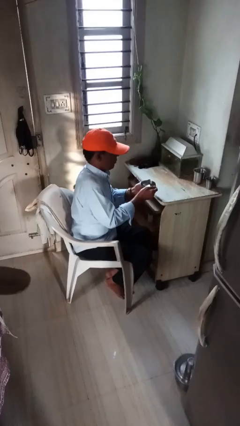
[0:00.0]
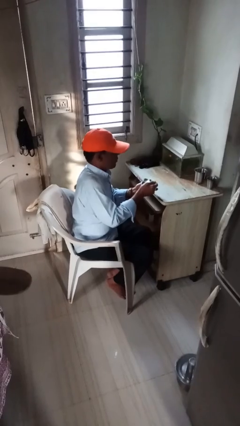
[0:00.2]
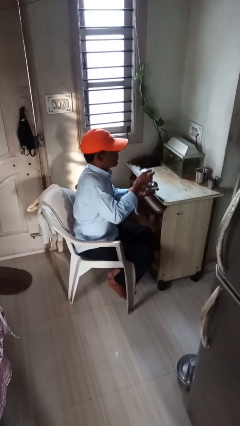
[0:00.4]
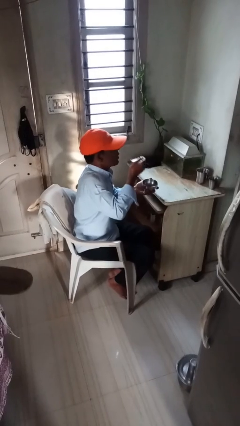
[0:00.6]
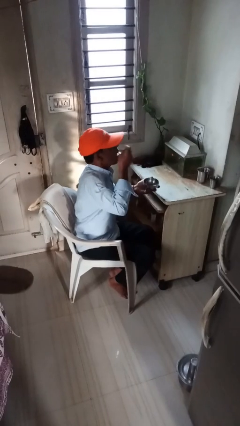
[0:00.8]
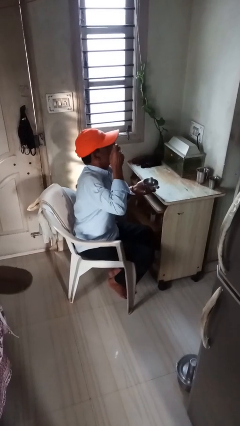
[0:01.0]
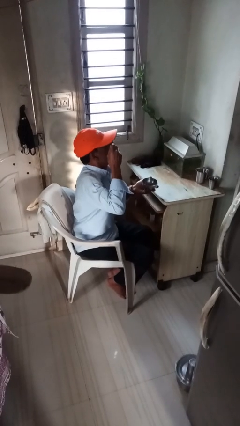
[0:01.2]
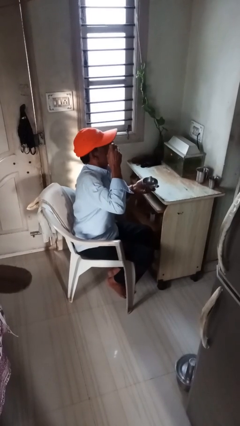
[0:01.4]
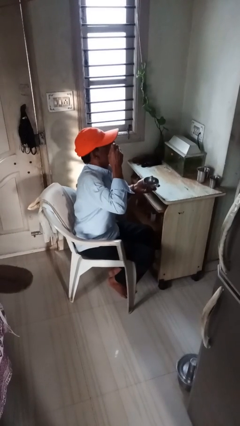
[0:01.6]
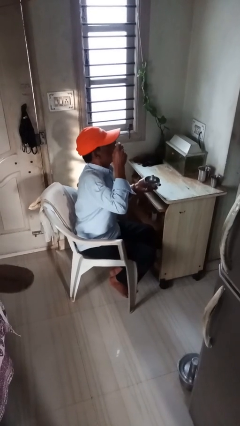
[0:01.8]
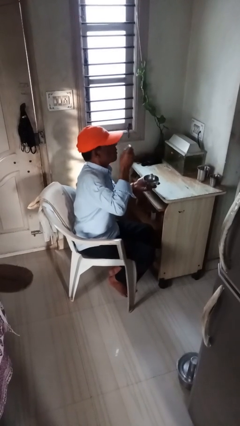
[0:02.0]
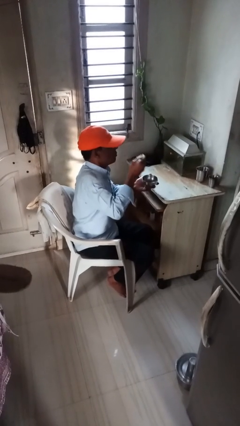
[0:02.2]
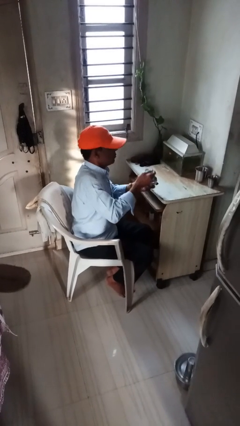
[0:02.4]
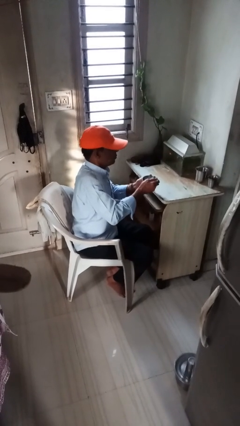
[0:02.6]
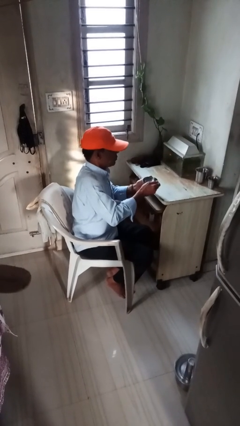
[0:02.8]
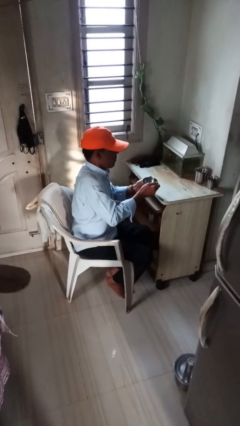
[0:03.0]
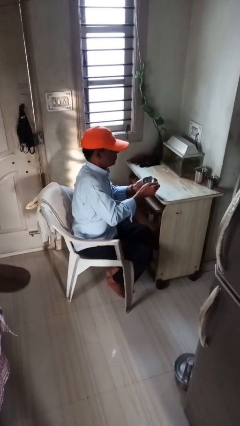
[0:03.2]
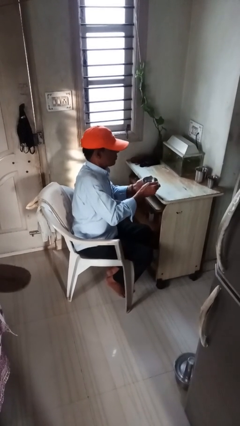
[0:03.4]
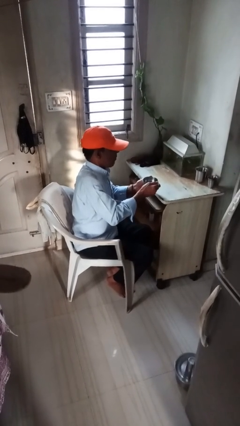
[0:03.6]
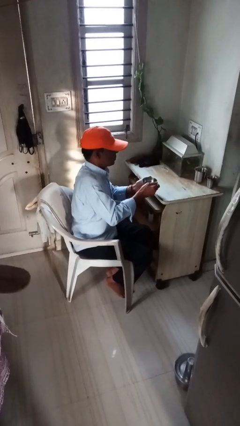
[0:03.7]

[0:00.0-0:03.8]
person eats with utensil

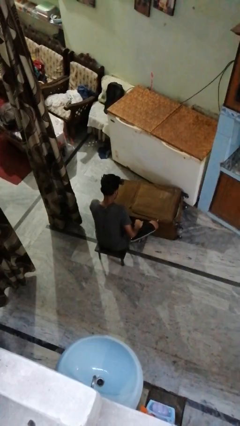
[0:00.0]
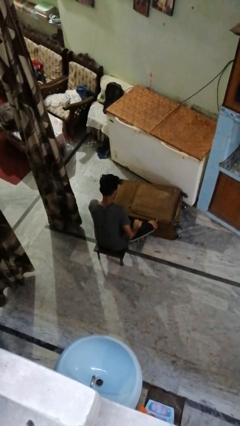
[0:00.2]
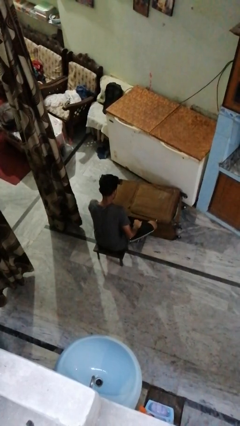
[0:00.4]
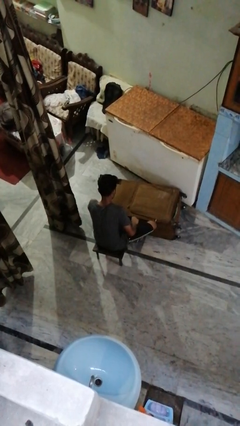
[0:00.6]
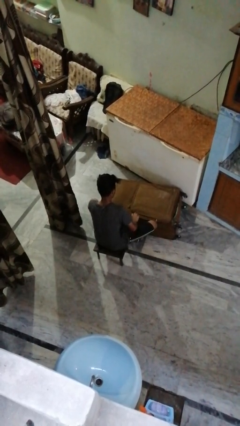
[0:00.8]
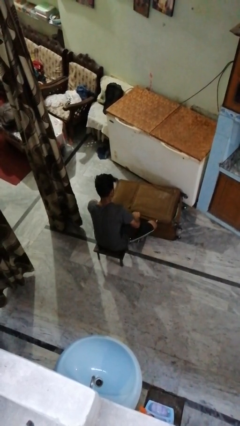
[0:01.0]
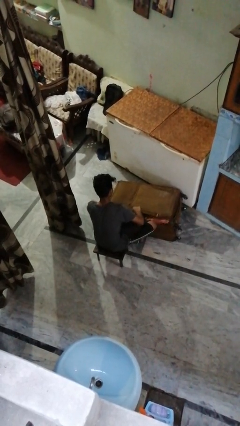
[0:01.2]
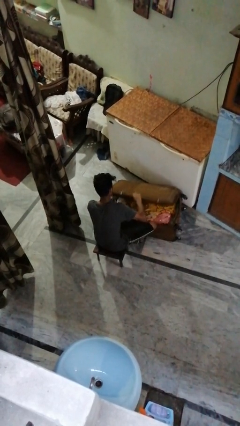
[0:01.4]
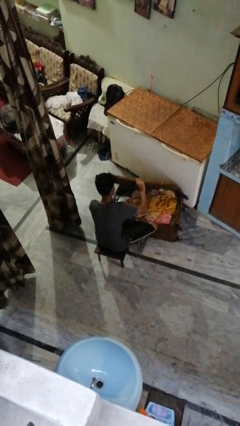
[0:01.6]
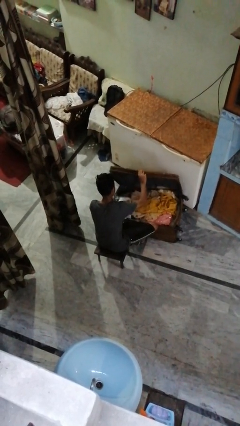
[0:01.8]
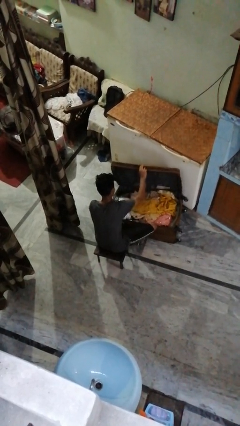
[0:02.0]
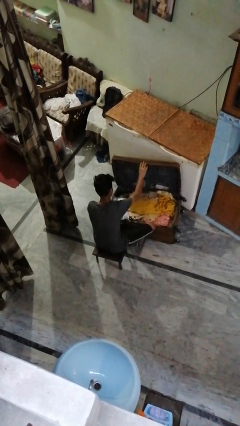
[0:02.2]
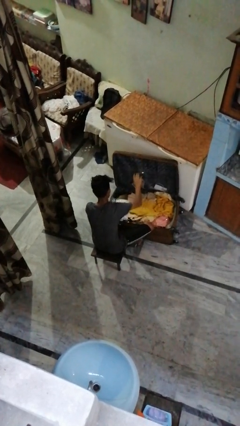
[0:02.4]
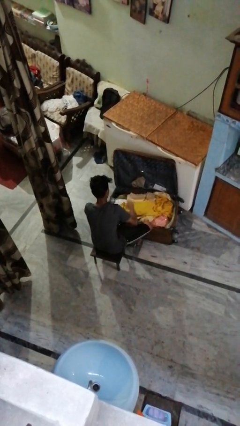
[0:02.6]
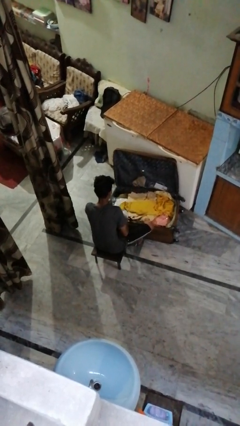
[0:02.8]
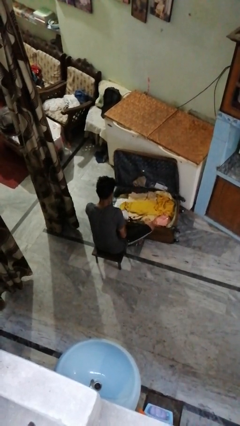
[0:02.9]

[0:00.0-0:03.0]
person opens suitcase

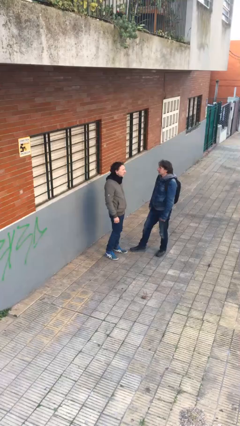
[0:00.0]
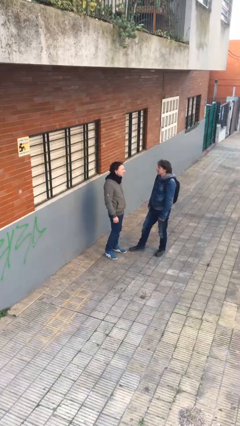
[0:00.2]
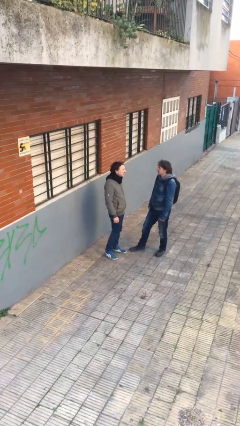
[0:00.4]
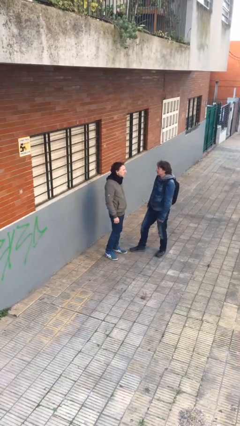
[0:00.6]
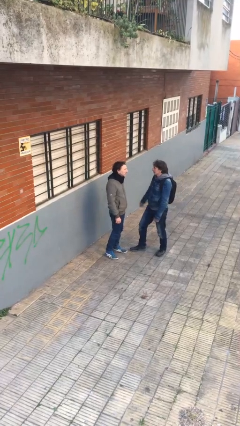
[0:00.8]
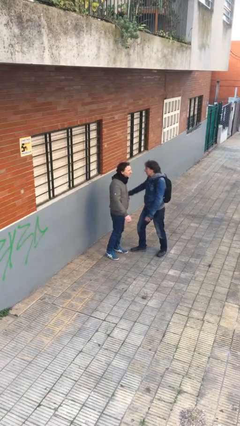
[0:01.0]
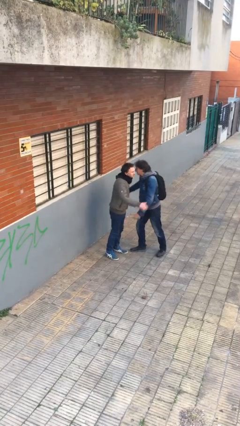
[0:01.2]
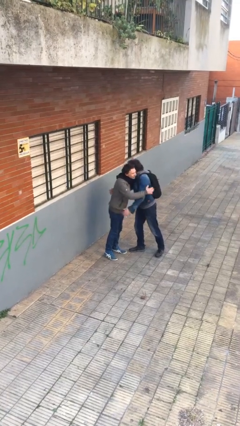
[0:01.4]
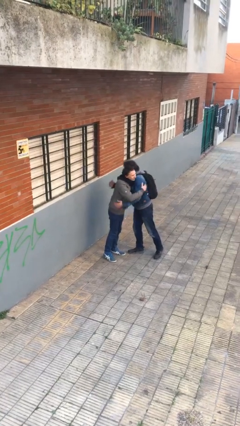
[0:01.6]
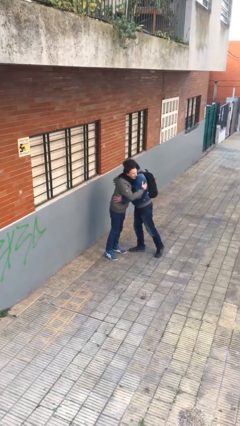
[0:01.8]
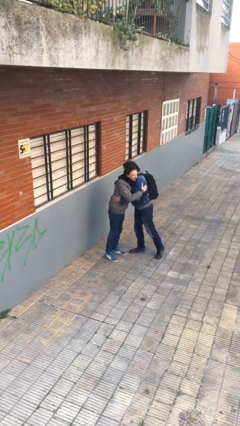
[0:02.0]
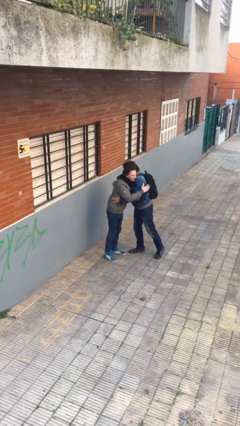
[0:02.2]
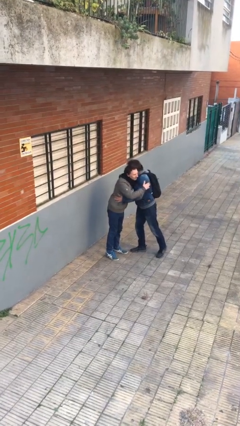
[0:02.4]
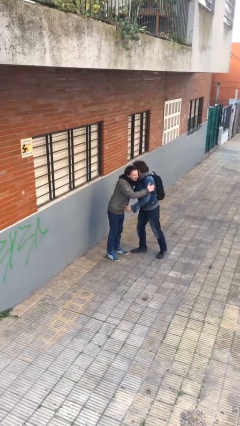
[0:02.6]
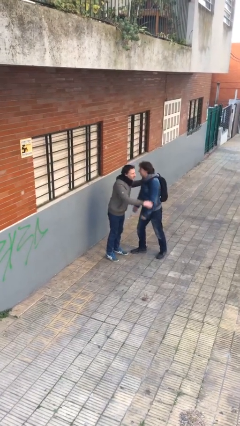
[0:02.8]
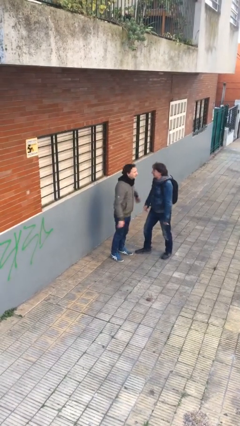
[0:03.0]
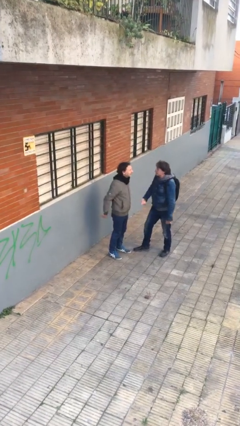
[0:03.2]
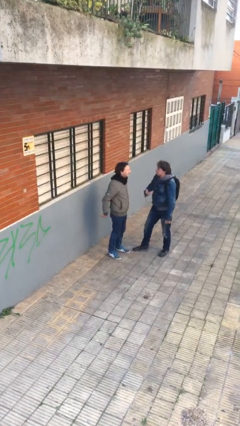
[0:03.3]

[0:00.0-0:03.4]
person embraces person

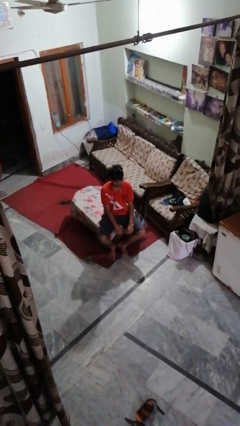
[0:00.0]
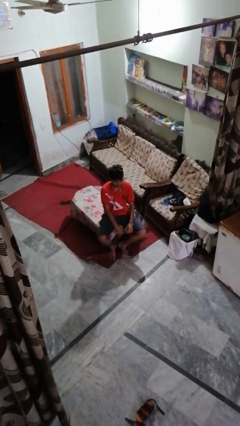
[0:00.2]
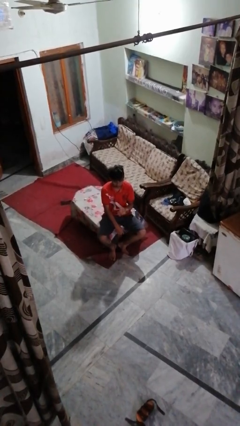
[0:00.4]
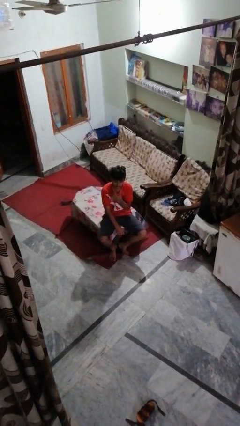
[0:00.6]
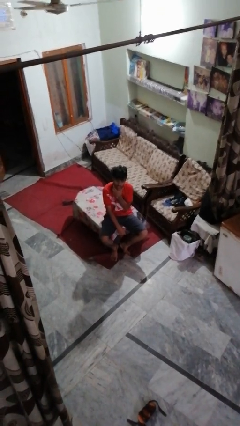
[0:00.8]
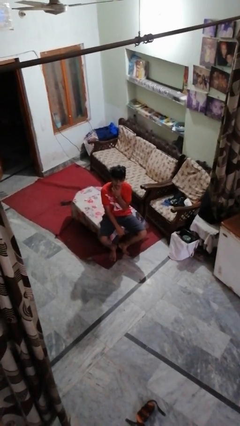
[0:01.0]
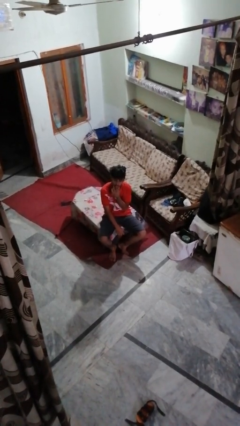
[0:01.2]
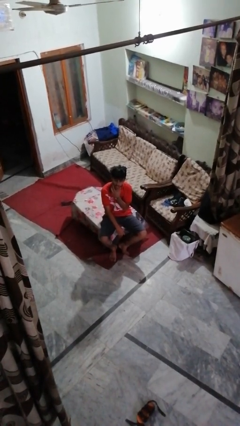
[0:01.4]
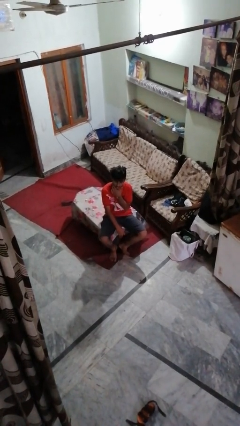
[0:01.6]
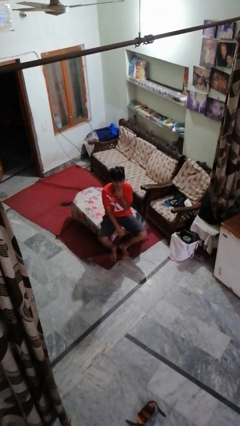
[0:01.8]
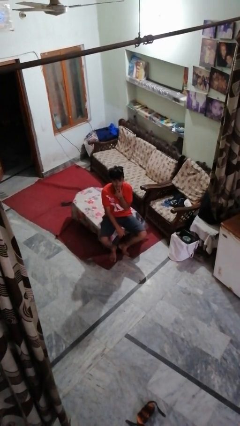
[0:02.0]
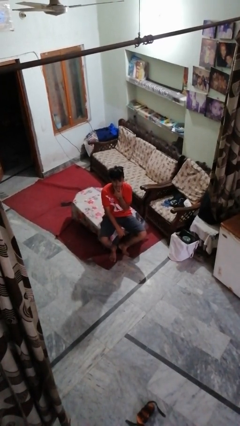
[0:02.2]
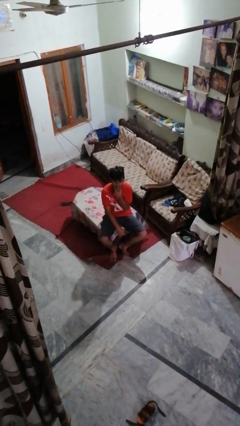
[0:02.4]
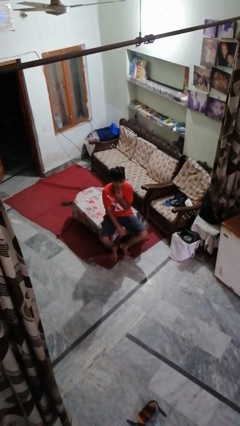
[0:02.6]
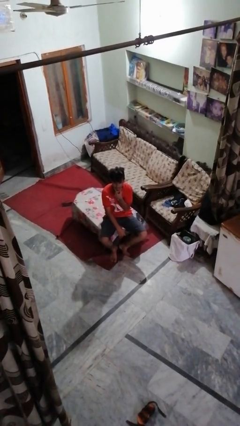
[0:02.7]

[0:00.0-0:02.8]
person strokes chin

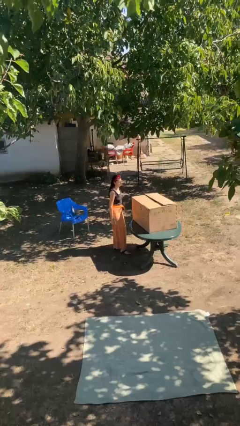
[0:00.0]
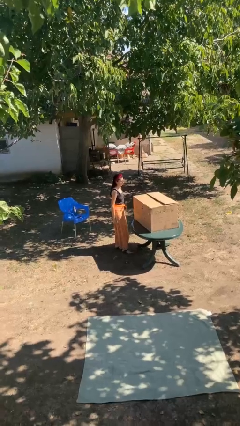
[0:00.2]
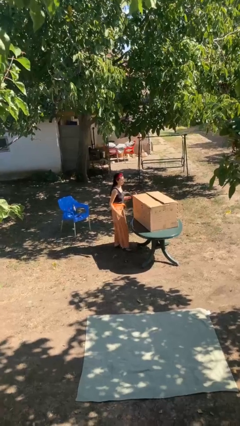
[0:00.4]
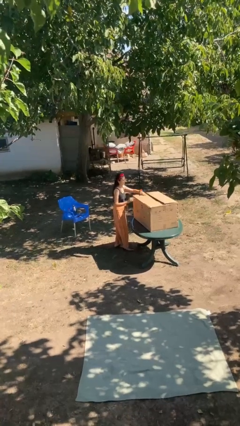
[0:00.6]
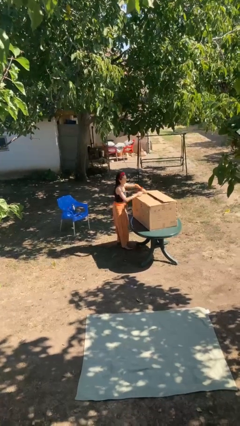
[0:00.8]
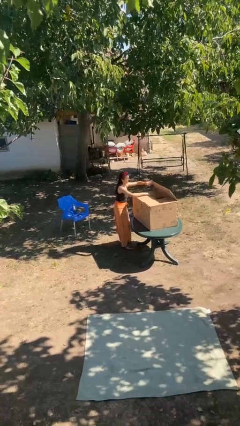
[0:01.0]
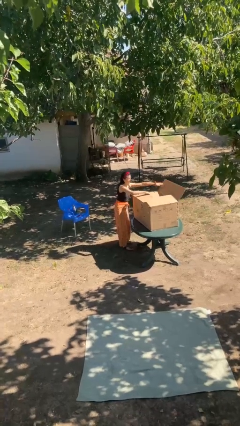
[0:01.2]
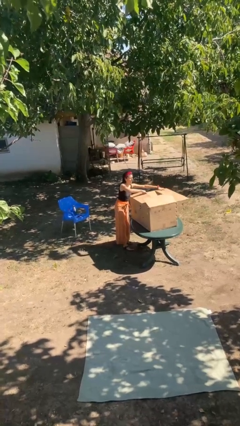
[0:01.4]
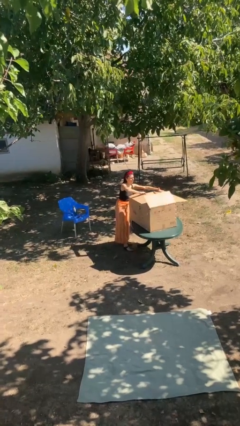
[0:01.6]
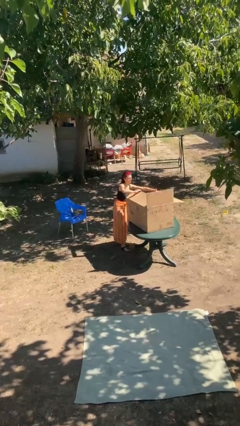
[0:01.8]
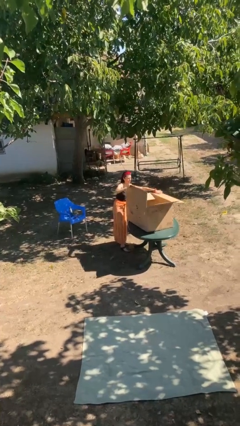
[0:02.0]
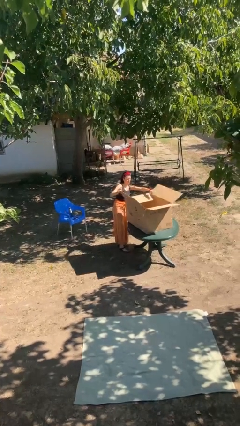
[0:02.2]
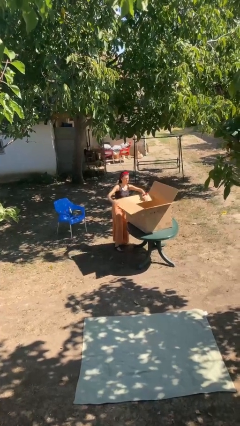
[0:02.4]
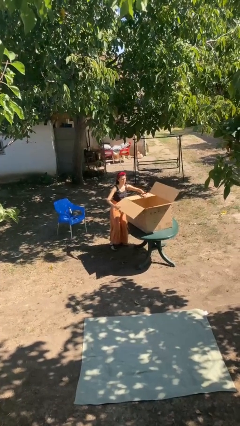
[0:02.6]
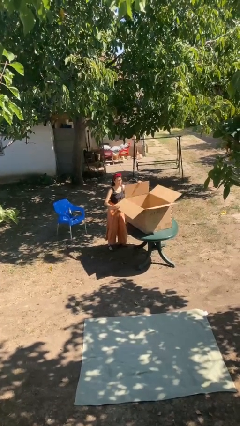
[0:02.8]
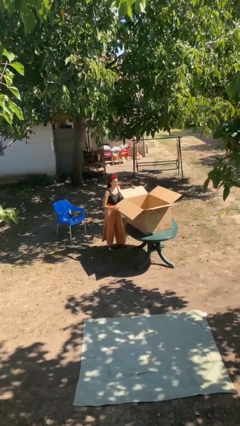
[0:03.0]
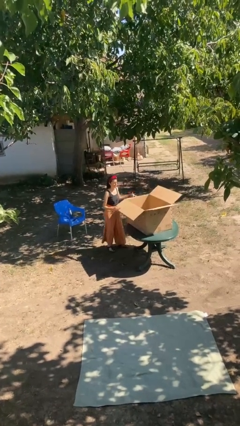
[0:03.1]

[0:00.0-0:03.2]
person opens box

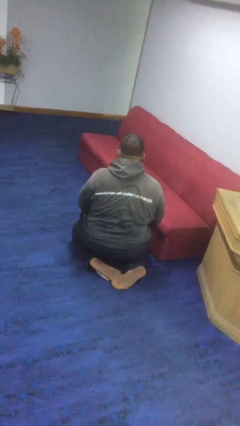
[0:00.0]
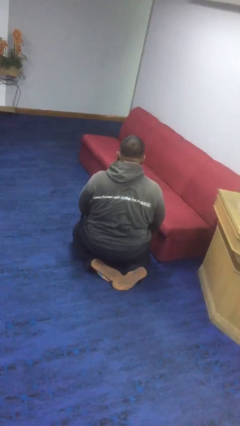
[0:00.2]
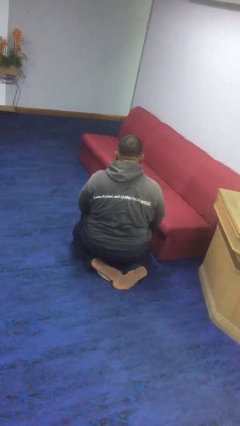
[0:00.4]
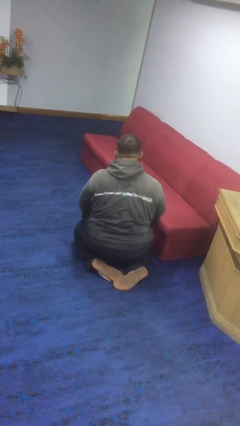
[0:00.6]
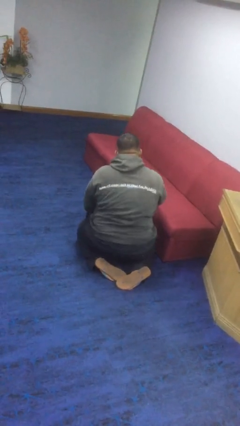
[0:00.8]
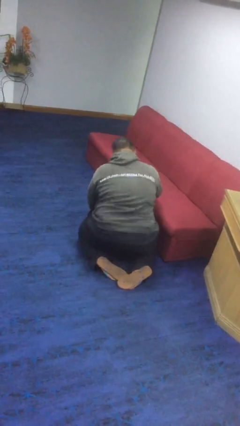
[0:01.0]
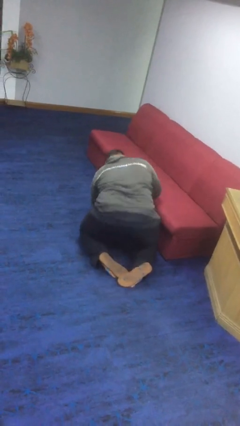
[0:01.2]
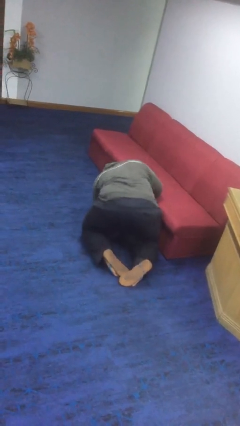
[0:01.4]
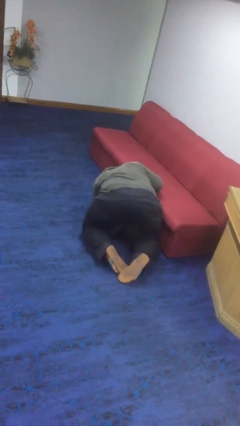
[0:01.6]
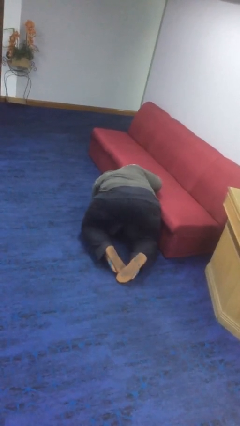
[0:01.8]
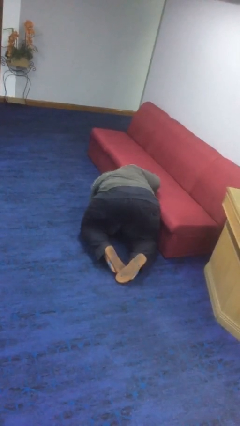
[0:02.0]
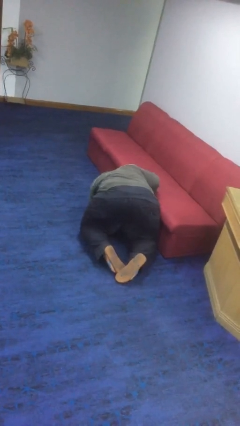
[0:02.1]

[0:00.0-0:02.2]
person searches under couch
